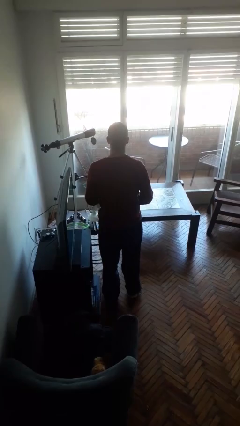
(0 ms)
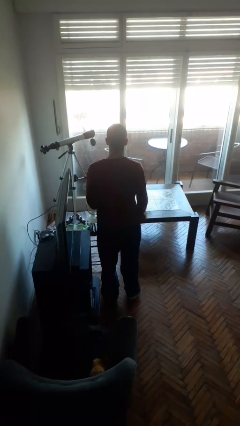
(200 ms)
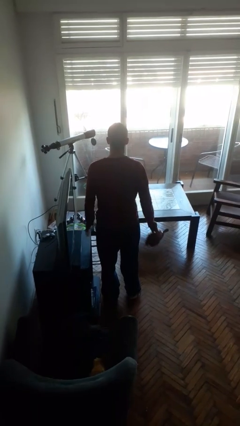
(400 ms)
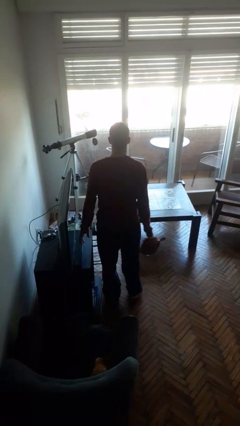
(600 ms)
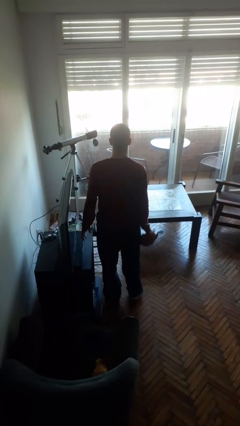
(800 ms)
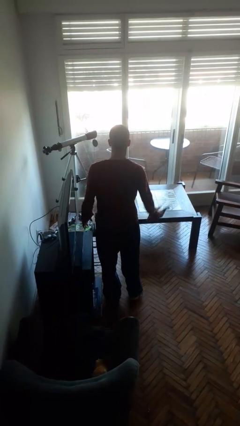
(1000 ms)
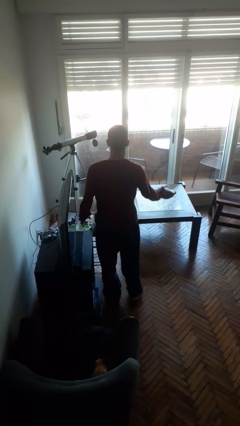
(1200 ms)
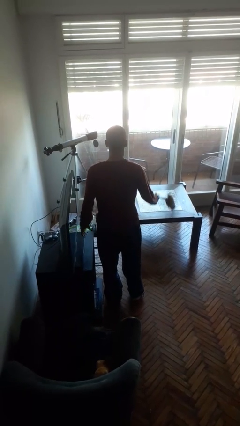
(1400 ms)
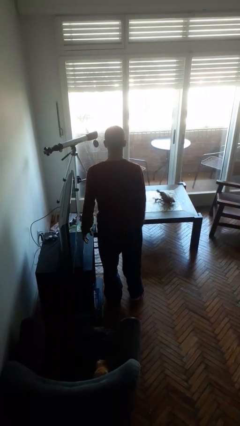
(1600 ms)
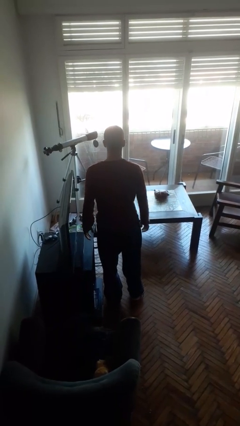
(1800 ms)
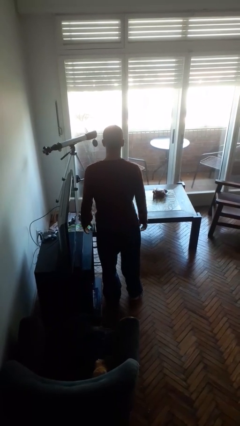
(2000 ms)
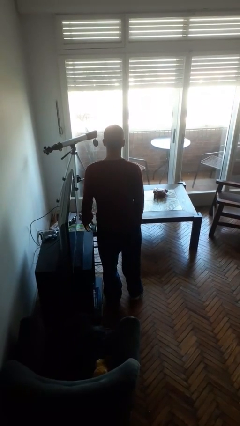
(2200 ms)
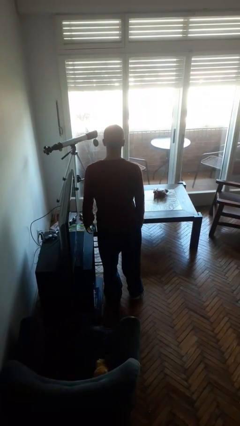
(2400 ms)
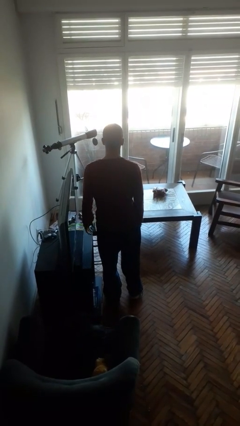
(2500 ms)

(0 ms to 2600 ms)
person throws object on table

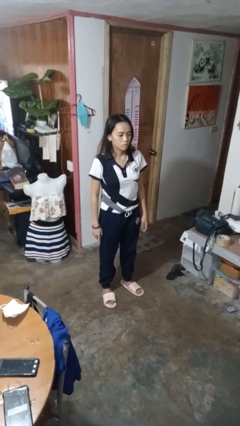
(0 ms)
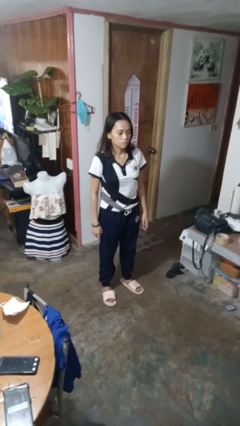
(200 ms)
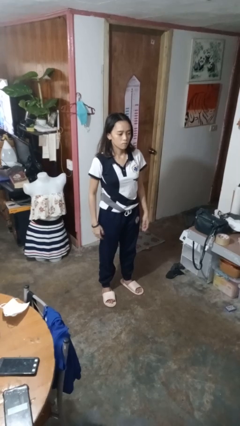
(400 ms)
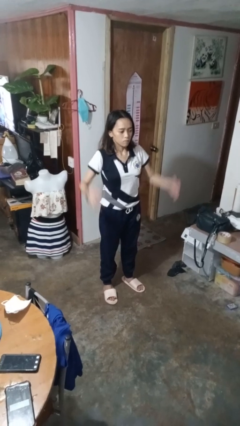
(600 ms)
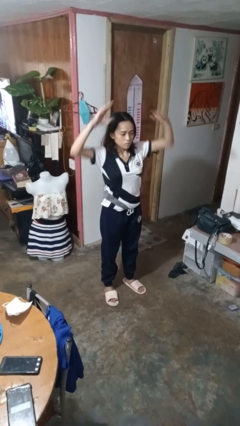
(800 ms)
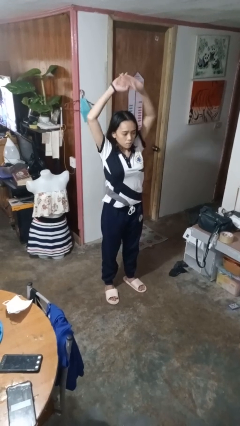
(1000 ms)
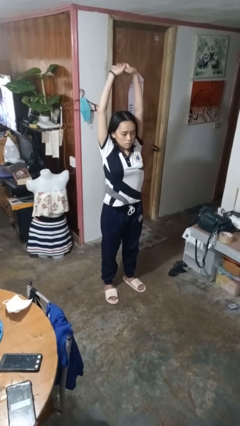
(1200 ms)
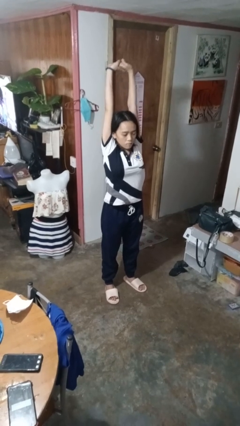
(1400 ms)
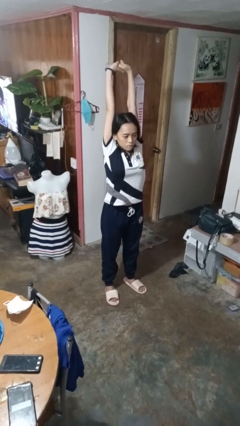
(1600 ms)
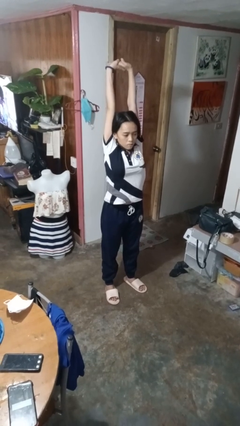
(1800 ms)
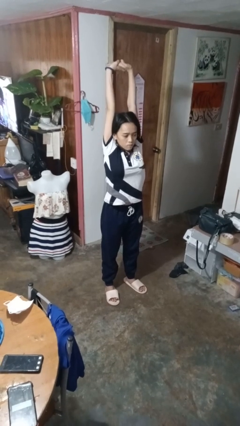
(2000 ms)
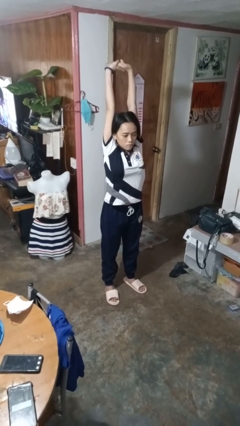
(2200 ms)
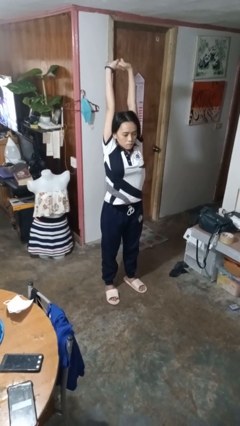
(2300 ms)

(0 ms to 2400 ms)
person stretches arms over head

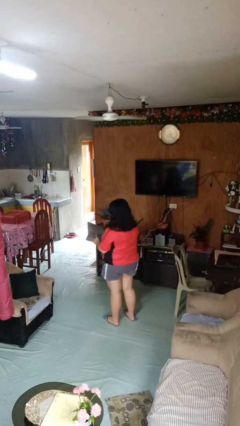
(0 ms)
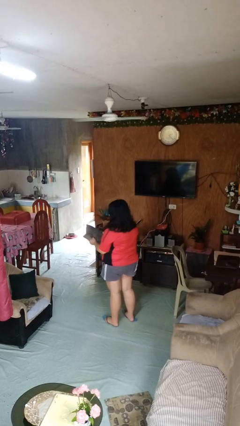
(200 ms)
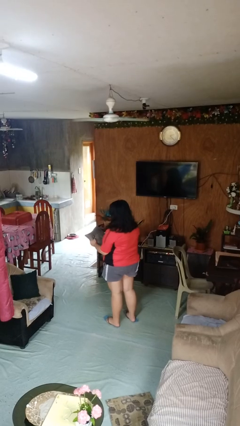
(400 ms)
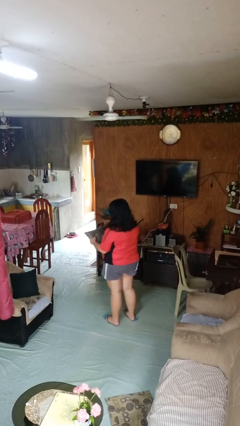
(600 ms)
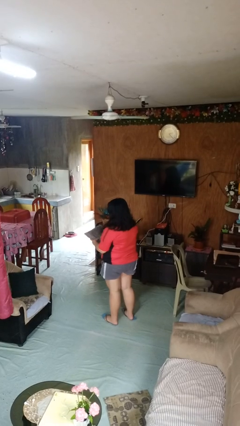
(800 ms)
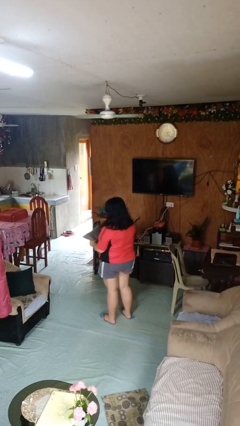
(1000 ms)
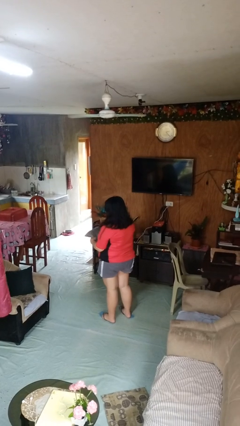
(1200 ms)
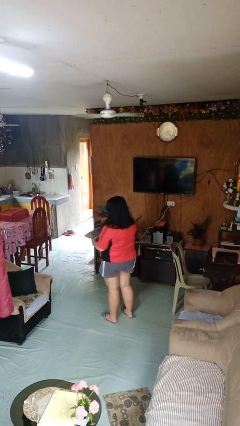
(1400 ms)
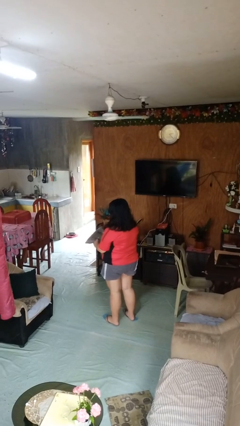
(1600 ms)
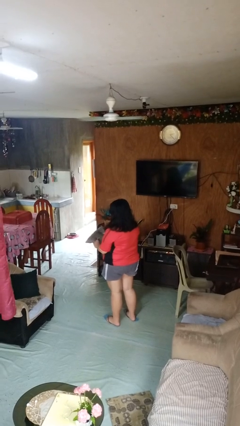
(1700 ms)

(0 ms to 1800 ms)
person squeezes object

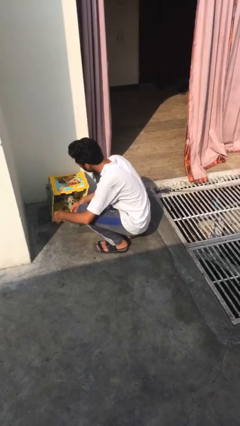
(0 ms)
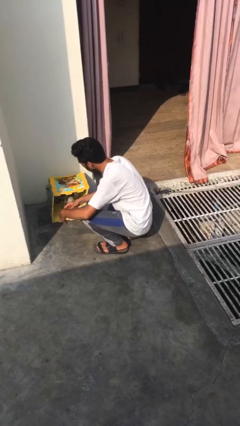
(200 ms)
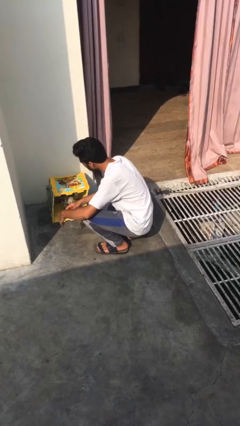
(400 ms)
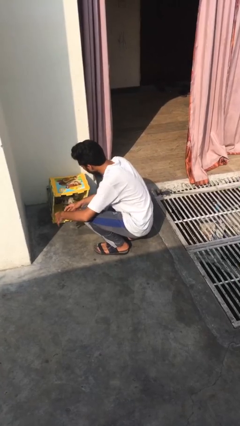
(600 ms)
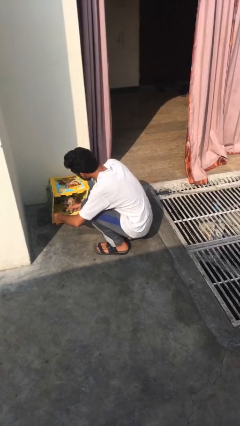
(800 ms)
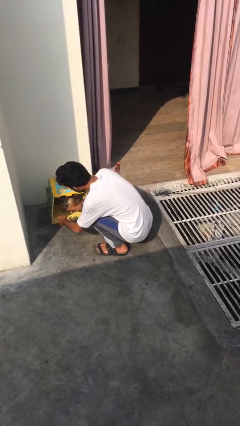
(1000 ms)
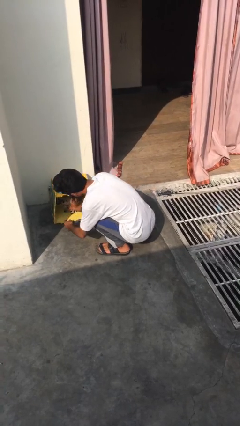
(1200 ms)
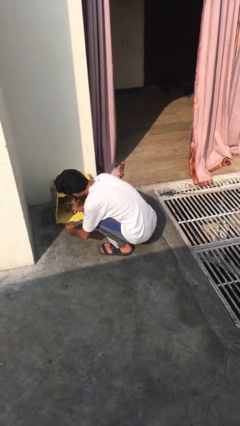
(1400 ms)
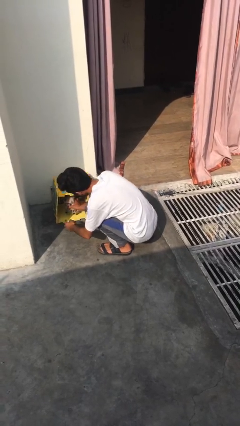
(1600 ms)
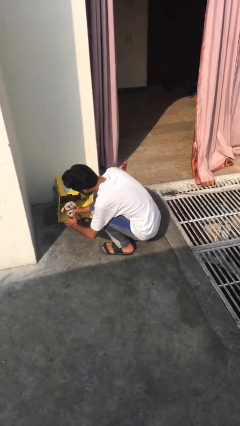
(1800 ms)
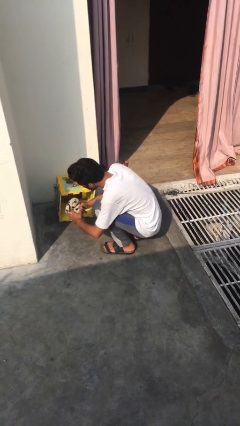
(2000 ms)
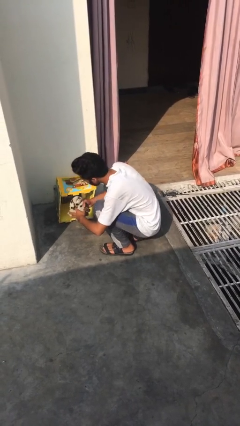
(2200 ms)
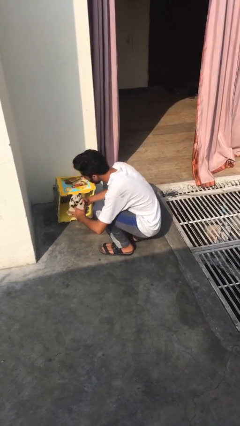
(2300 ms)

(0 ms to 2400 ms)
person uncrates dog

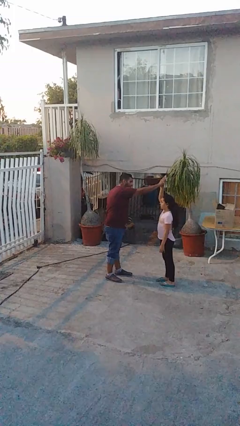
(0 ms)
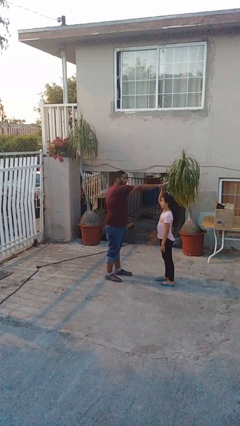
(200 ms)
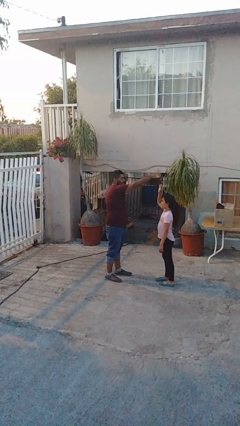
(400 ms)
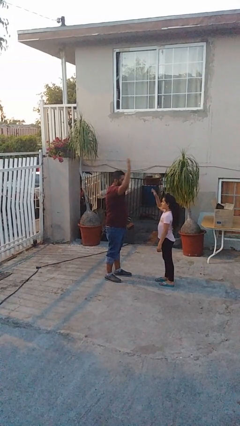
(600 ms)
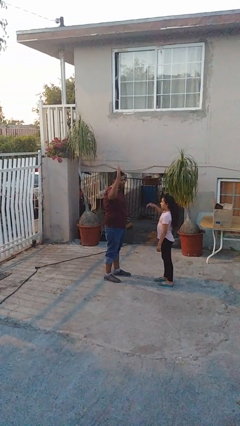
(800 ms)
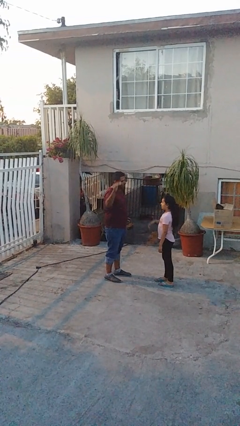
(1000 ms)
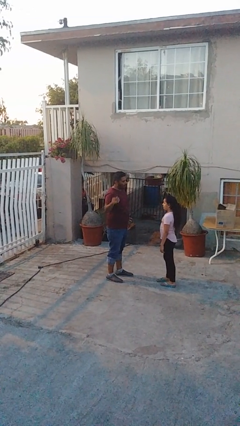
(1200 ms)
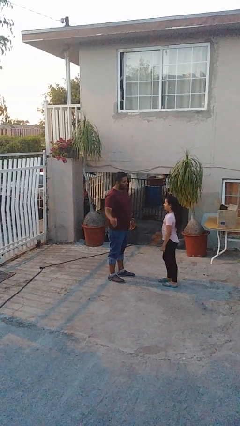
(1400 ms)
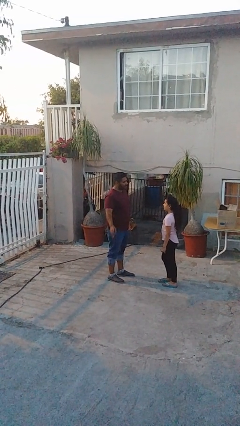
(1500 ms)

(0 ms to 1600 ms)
person highfives hand

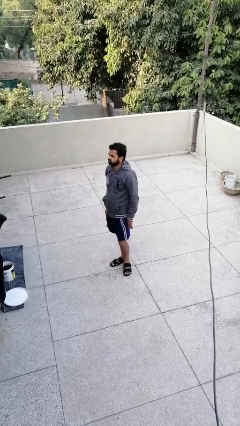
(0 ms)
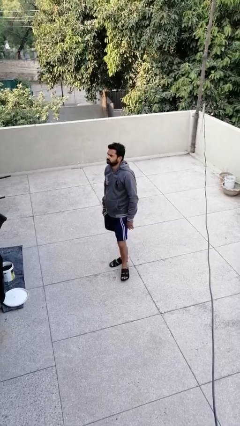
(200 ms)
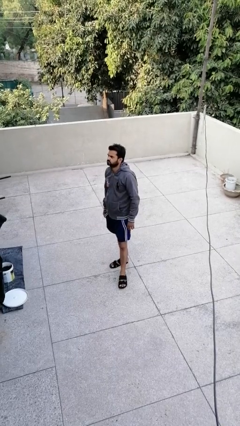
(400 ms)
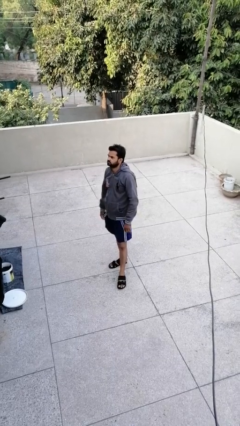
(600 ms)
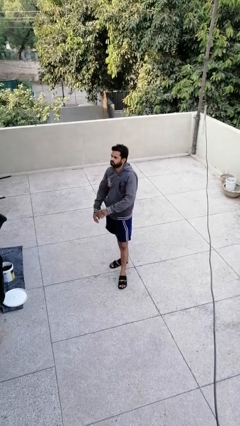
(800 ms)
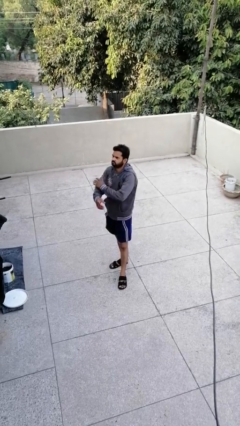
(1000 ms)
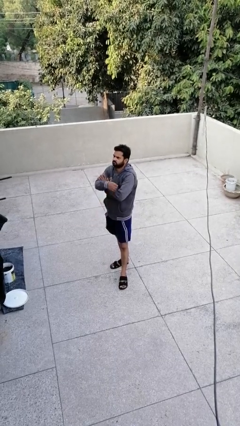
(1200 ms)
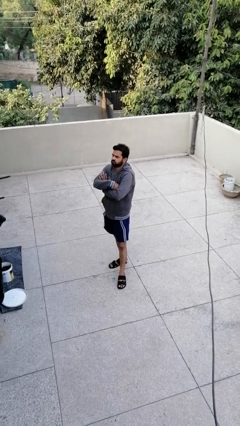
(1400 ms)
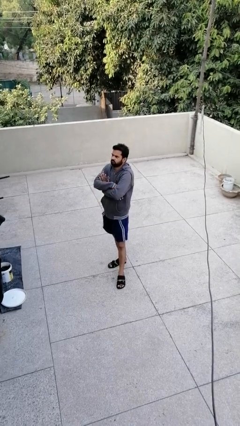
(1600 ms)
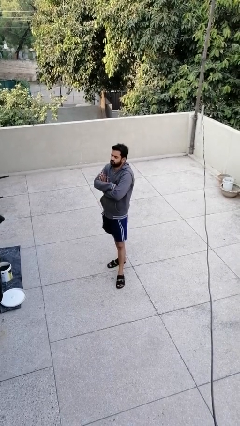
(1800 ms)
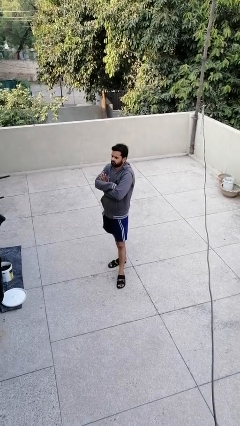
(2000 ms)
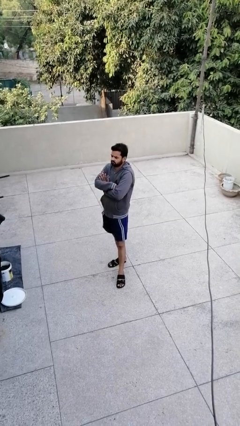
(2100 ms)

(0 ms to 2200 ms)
person crosses arms

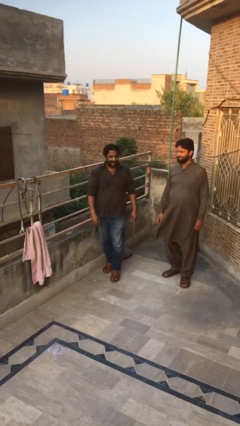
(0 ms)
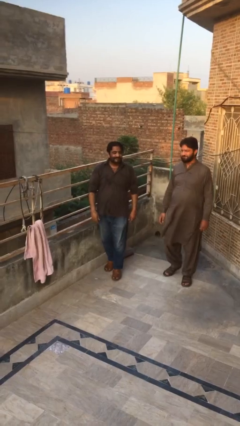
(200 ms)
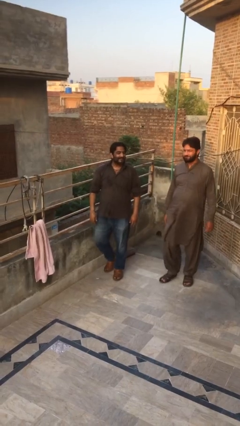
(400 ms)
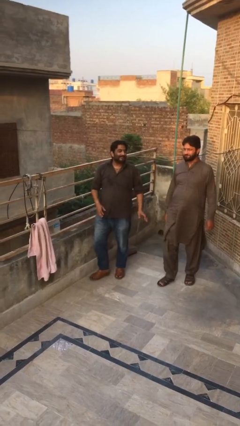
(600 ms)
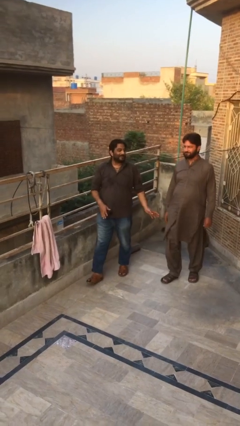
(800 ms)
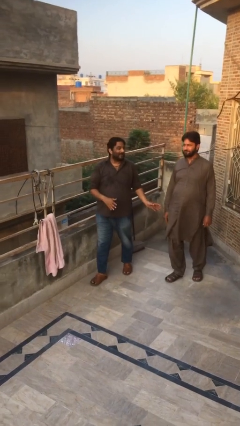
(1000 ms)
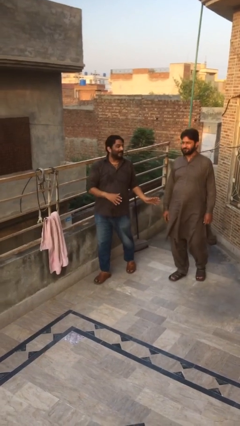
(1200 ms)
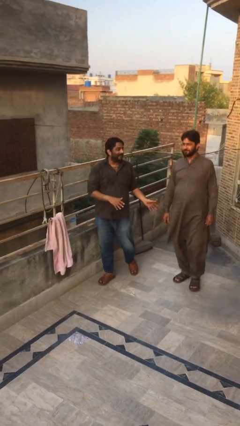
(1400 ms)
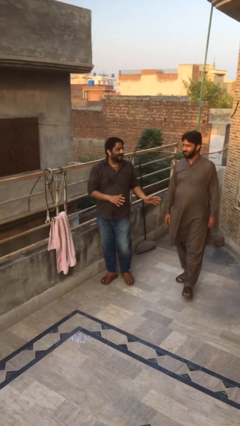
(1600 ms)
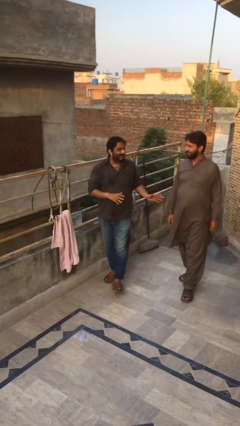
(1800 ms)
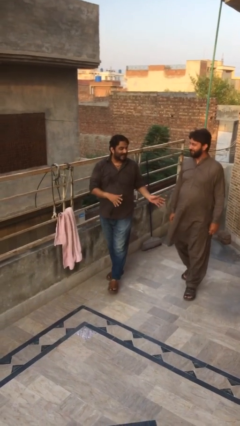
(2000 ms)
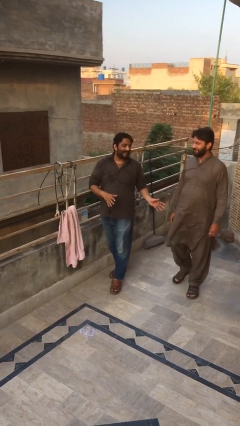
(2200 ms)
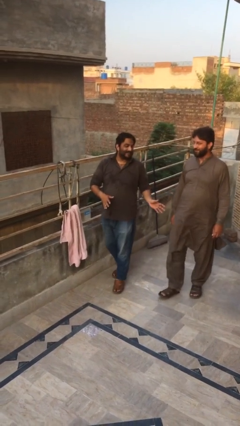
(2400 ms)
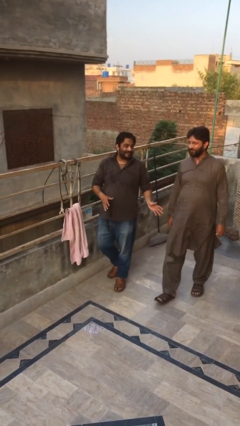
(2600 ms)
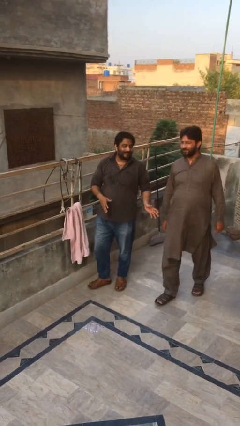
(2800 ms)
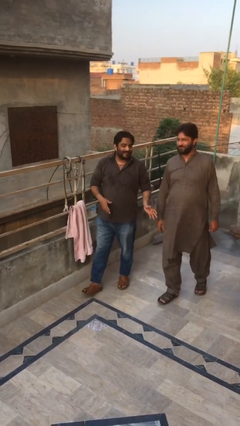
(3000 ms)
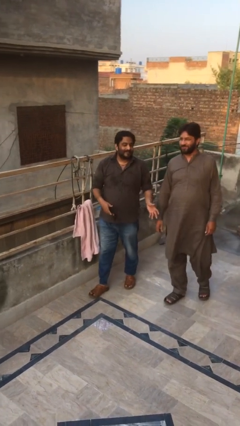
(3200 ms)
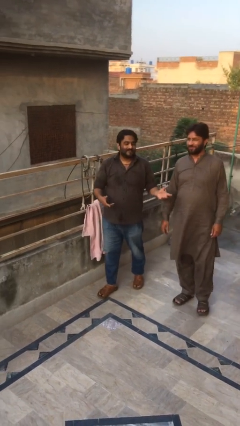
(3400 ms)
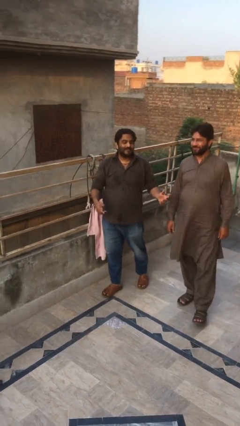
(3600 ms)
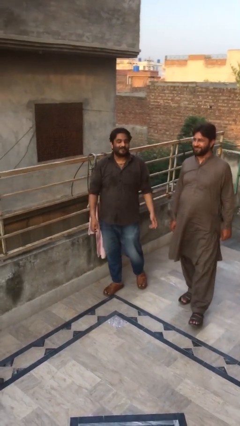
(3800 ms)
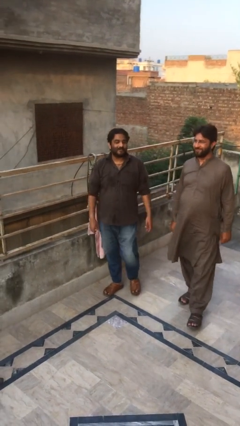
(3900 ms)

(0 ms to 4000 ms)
person talks to person

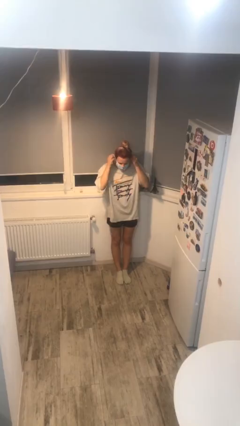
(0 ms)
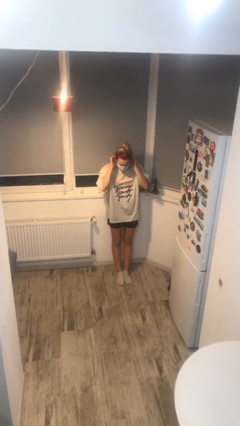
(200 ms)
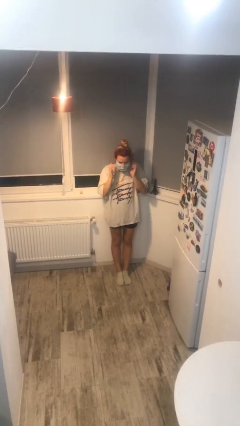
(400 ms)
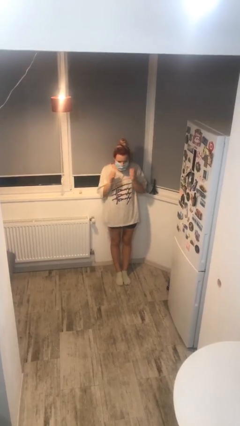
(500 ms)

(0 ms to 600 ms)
person puts on facemask
